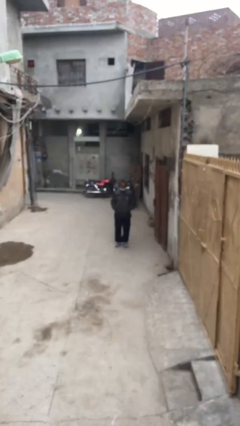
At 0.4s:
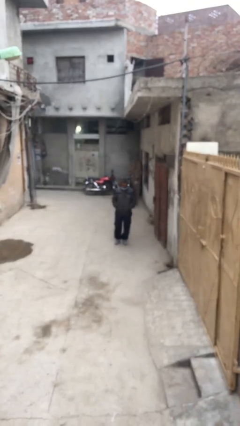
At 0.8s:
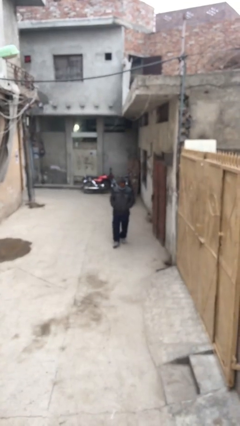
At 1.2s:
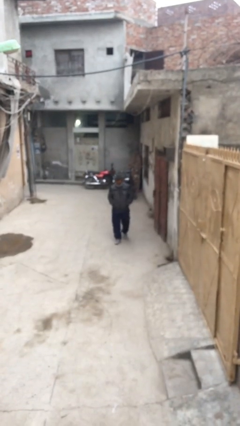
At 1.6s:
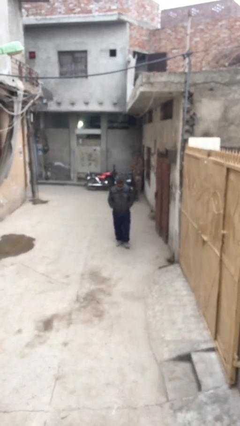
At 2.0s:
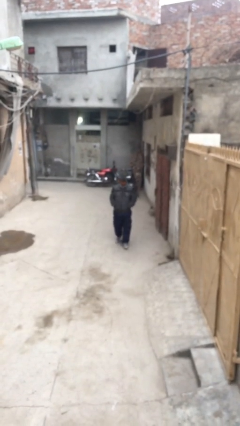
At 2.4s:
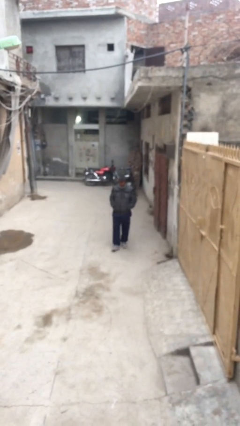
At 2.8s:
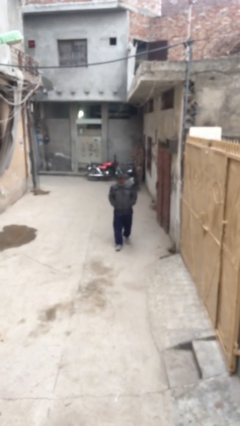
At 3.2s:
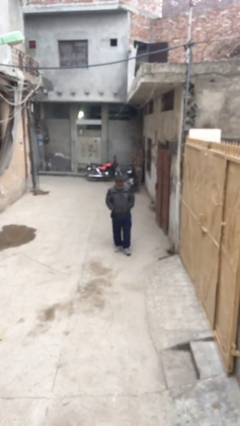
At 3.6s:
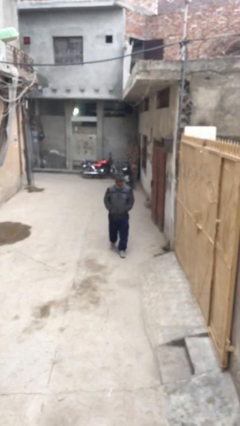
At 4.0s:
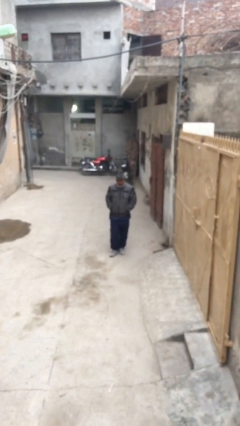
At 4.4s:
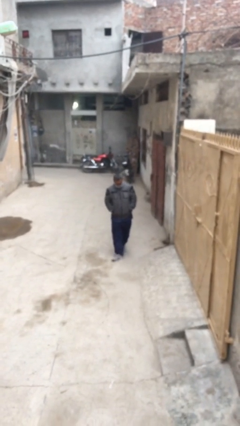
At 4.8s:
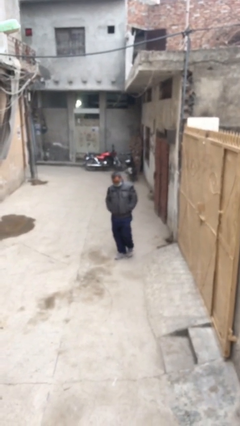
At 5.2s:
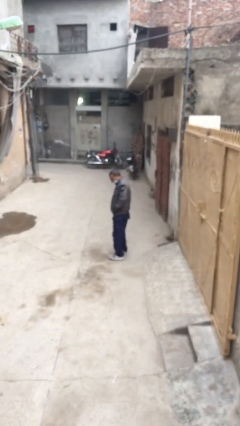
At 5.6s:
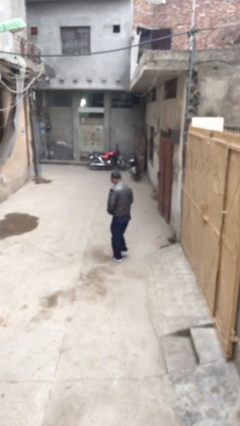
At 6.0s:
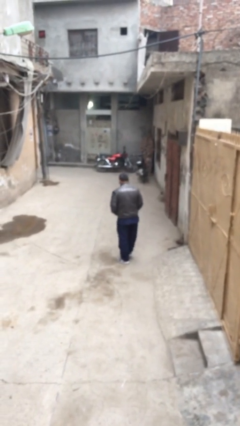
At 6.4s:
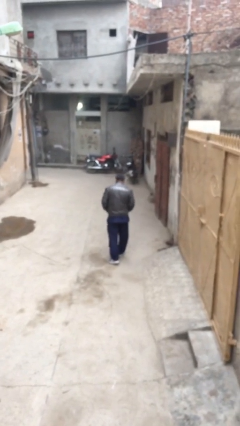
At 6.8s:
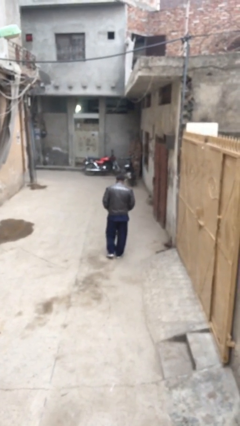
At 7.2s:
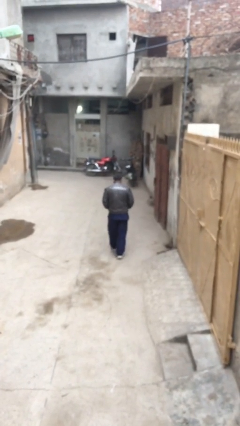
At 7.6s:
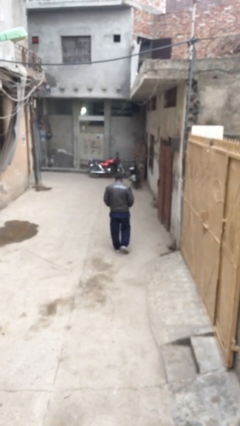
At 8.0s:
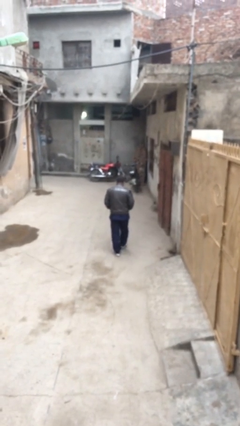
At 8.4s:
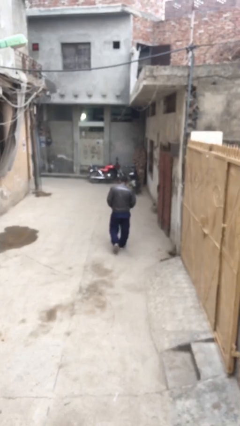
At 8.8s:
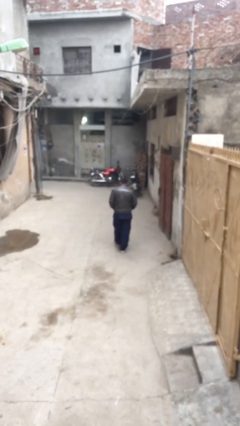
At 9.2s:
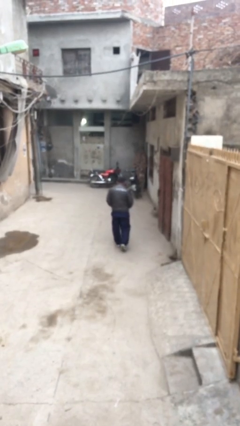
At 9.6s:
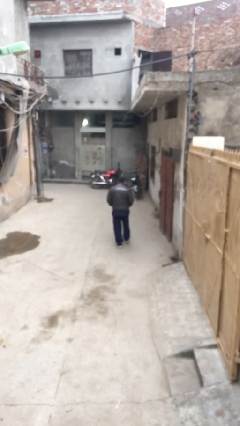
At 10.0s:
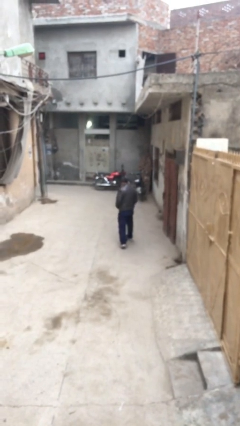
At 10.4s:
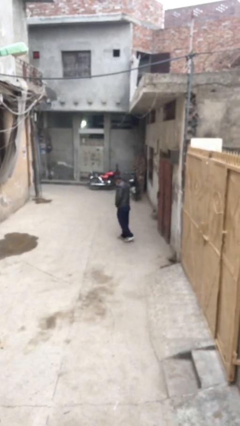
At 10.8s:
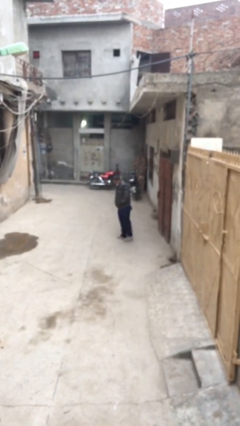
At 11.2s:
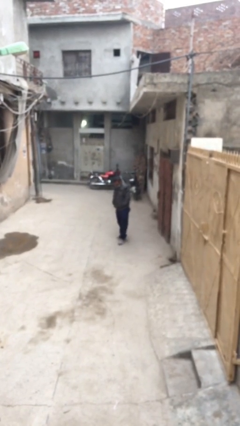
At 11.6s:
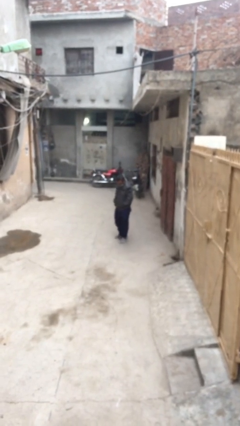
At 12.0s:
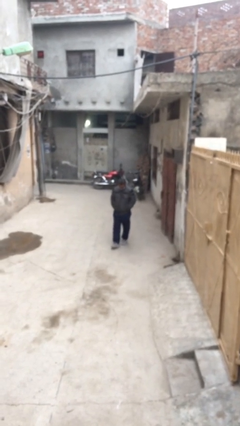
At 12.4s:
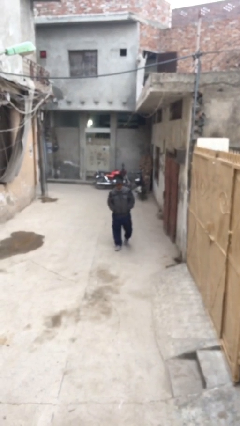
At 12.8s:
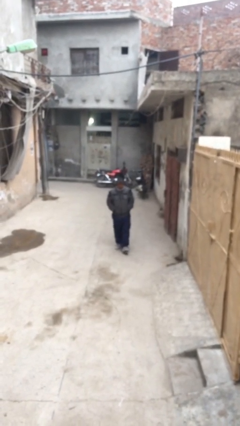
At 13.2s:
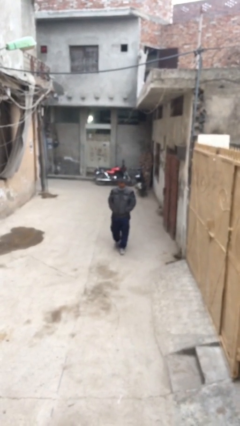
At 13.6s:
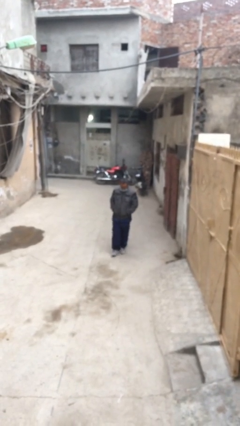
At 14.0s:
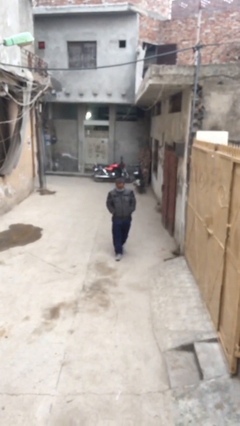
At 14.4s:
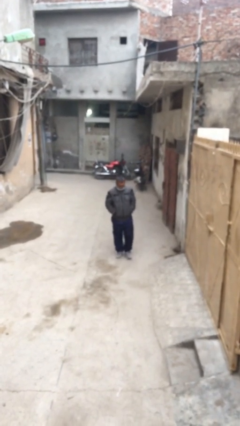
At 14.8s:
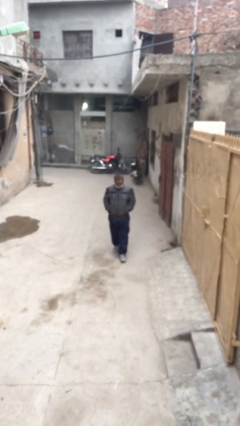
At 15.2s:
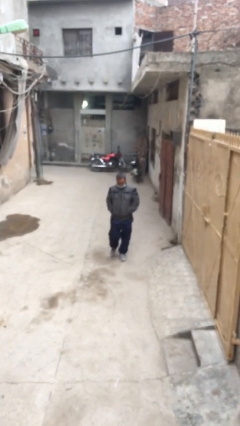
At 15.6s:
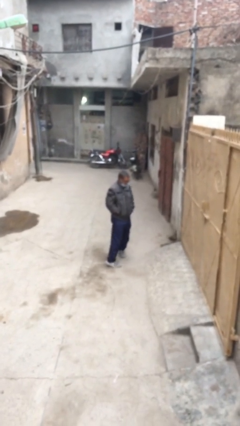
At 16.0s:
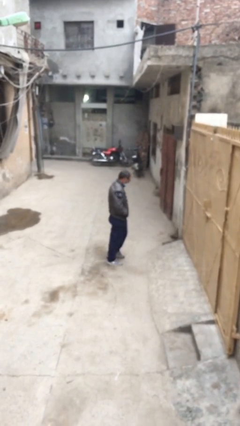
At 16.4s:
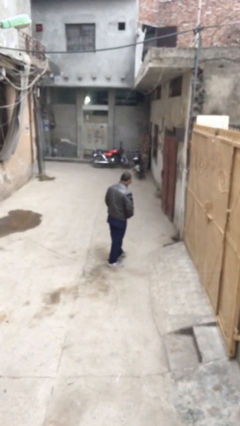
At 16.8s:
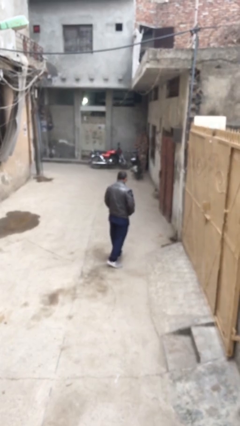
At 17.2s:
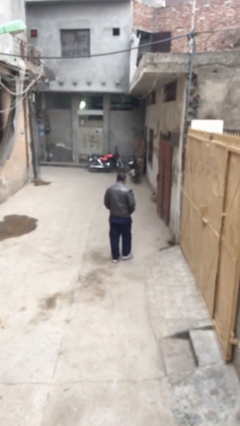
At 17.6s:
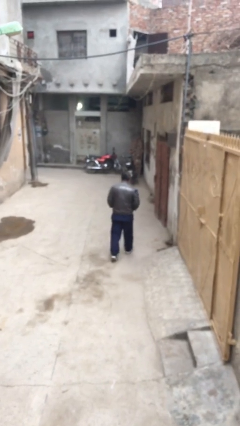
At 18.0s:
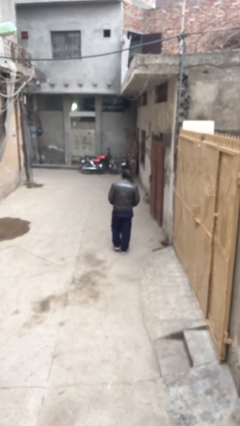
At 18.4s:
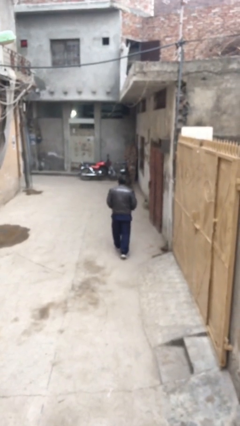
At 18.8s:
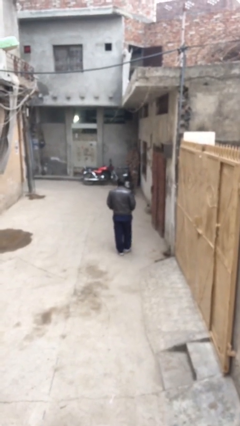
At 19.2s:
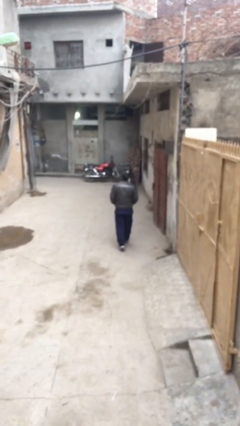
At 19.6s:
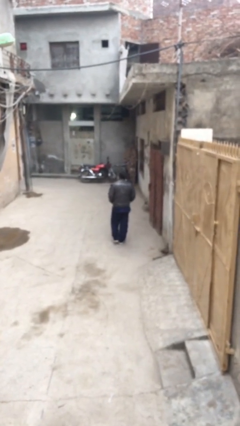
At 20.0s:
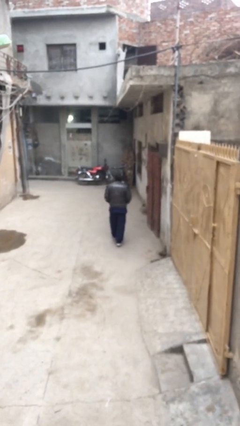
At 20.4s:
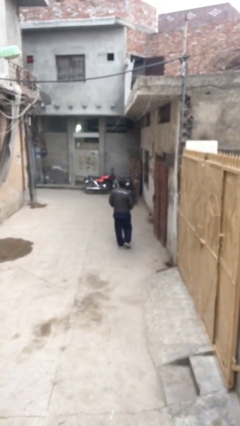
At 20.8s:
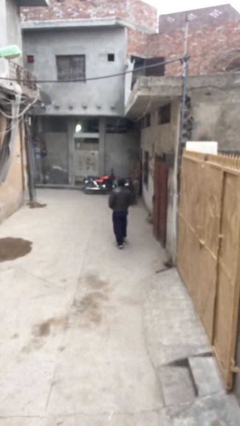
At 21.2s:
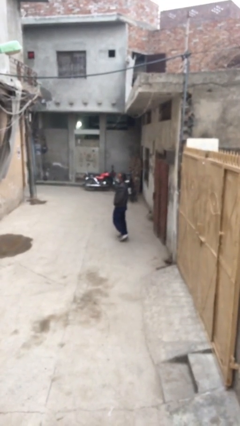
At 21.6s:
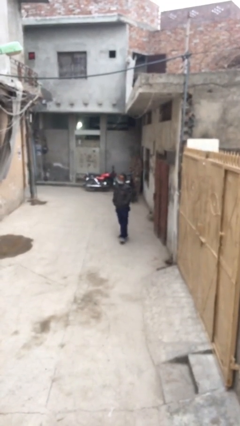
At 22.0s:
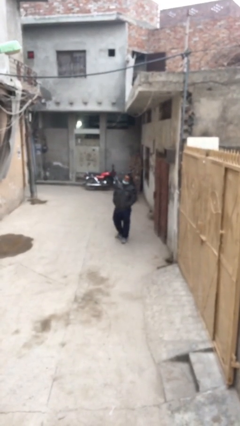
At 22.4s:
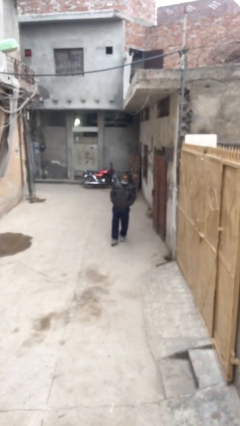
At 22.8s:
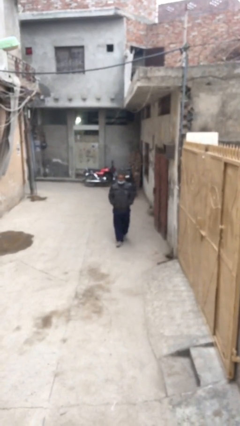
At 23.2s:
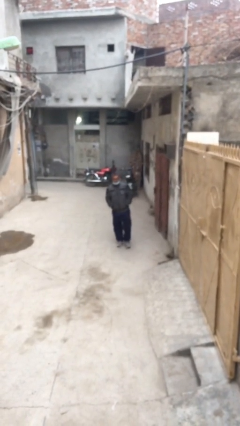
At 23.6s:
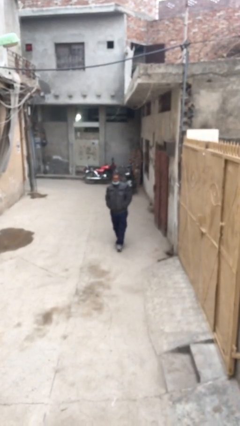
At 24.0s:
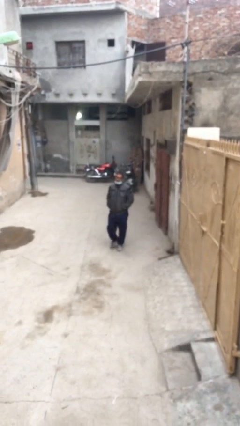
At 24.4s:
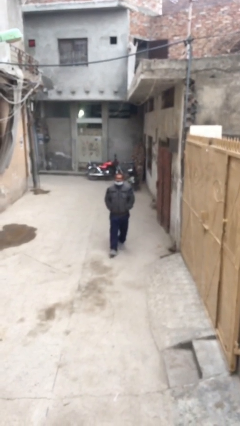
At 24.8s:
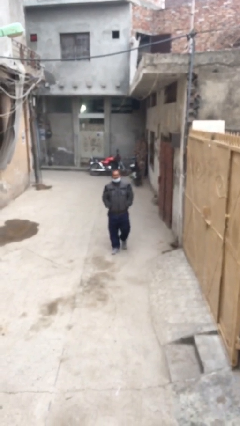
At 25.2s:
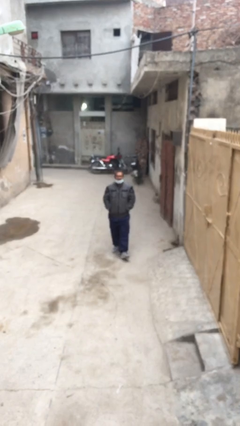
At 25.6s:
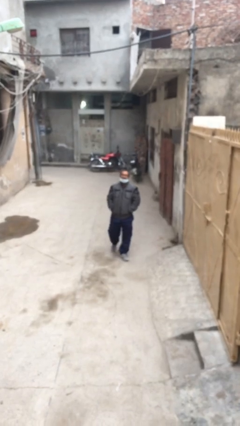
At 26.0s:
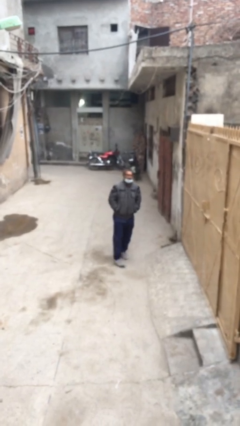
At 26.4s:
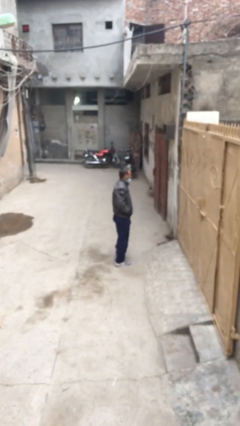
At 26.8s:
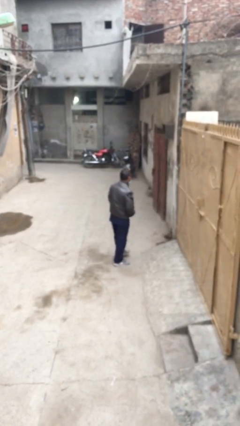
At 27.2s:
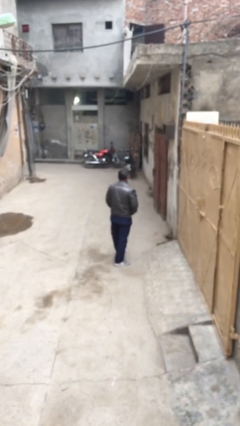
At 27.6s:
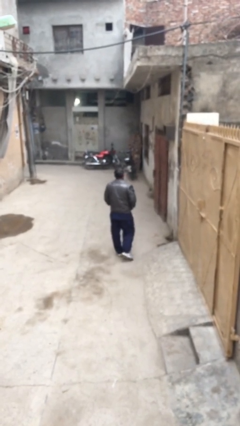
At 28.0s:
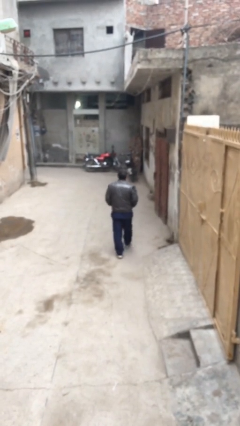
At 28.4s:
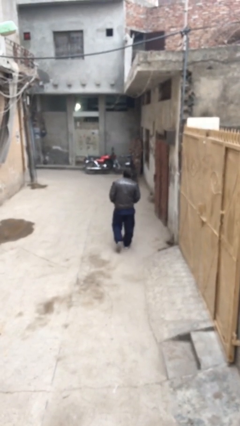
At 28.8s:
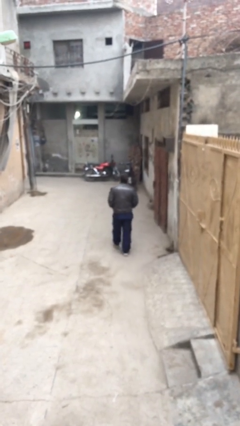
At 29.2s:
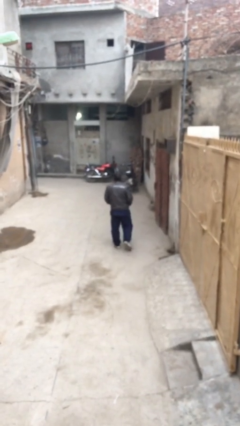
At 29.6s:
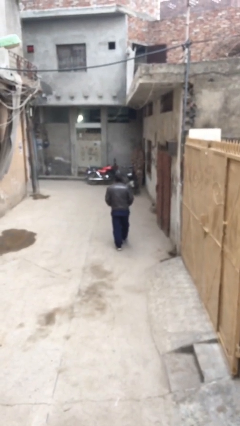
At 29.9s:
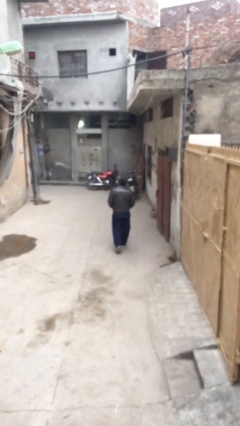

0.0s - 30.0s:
person walks

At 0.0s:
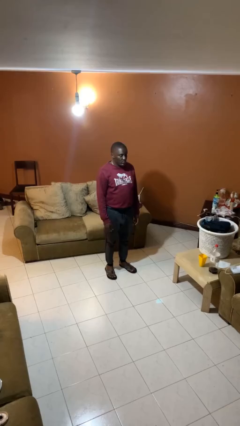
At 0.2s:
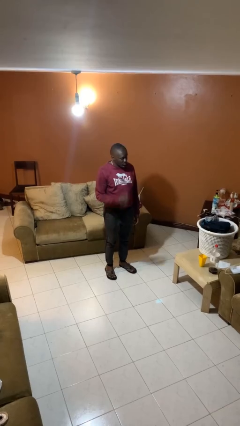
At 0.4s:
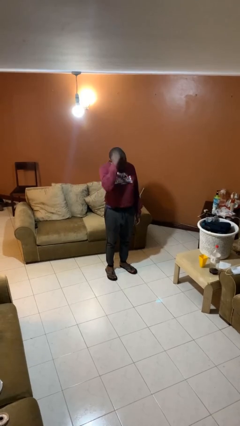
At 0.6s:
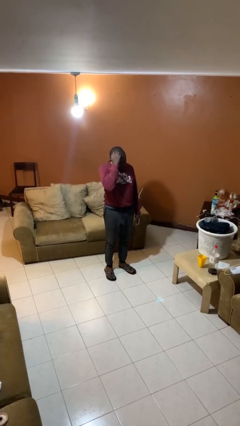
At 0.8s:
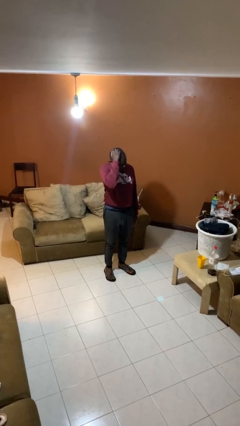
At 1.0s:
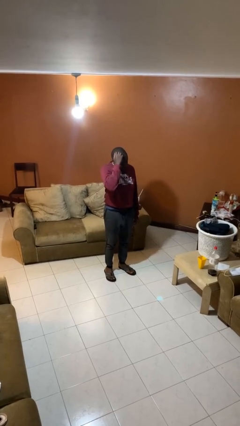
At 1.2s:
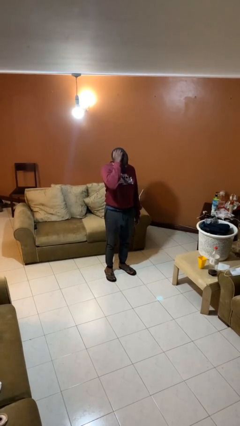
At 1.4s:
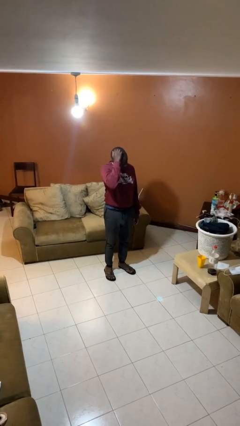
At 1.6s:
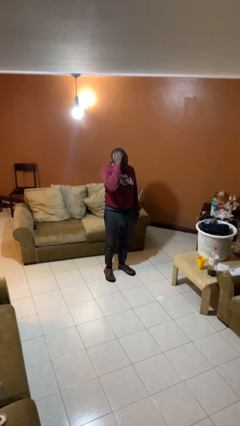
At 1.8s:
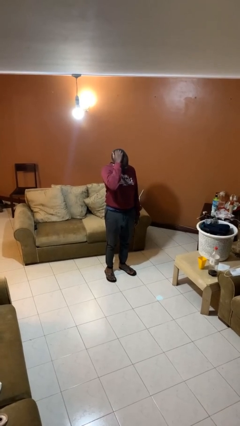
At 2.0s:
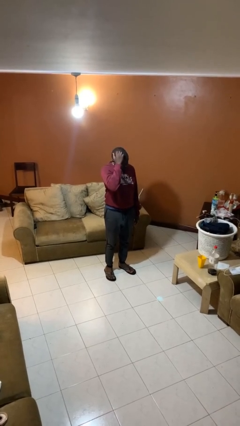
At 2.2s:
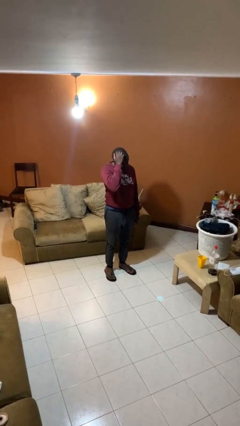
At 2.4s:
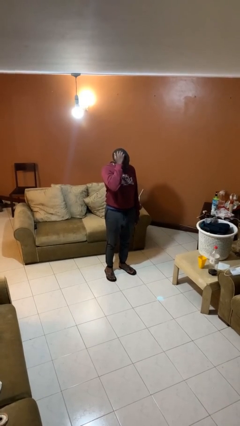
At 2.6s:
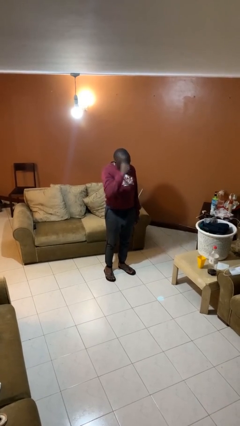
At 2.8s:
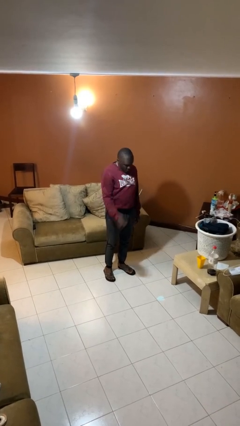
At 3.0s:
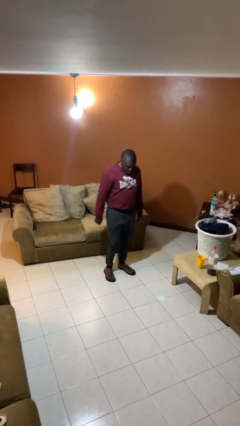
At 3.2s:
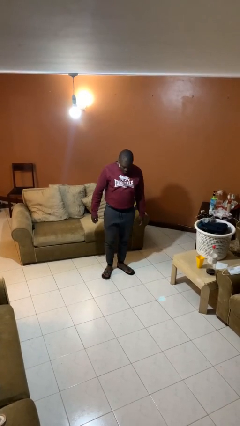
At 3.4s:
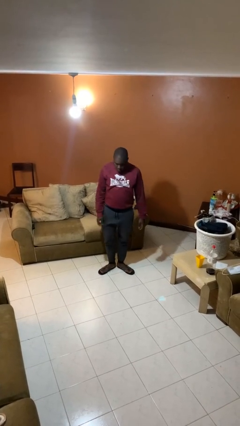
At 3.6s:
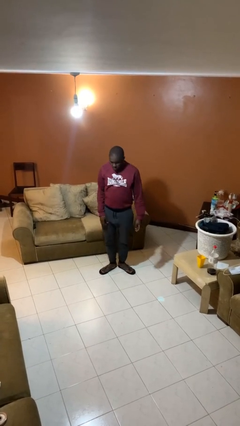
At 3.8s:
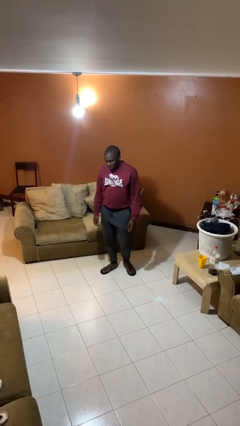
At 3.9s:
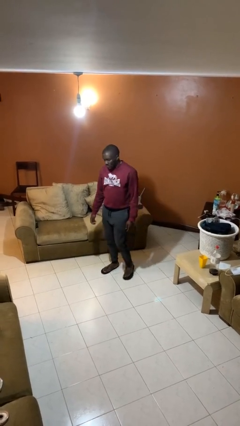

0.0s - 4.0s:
person scratches face
